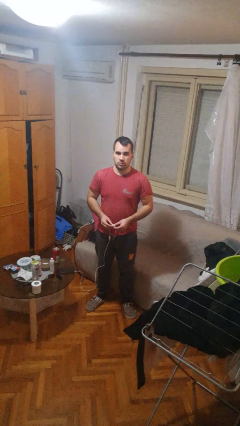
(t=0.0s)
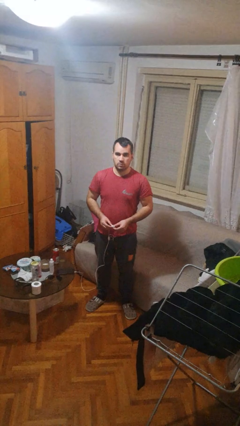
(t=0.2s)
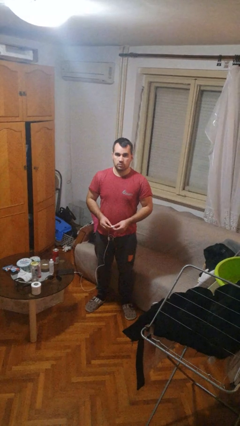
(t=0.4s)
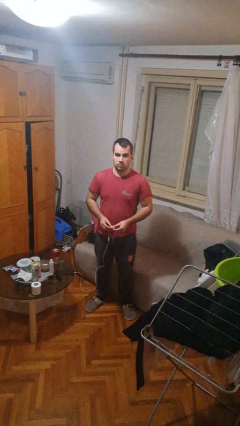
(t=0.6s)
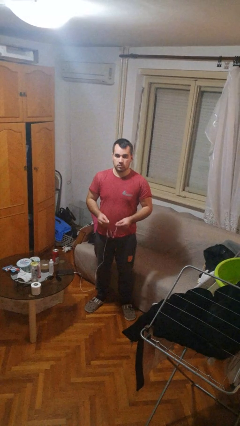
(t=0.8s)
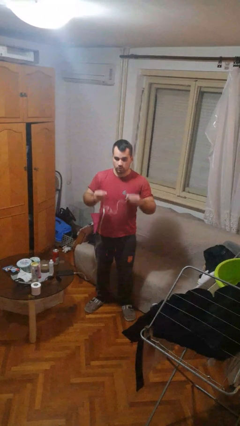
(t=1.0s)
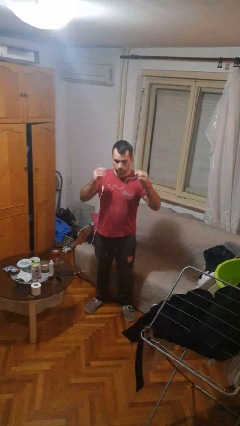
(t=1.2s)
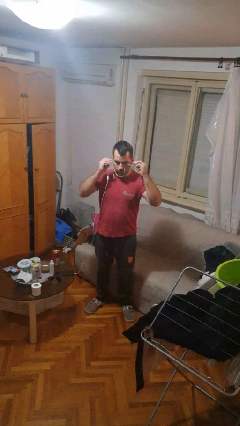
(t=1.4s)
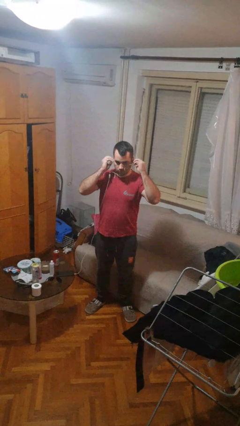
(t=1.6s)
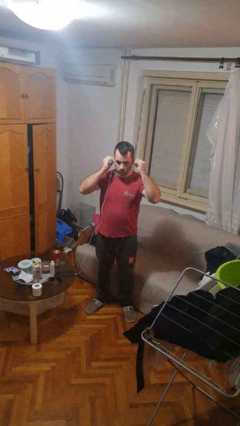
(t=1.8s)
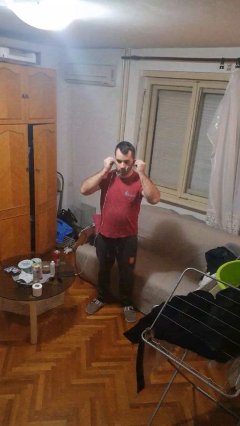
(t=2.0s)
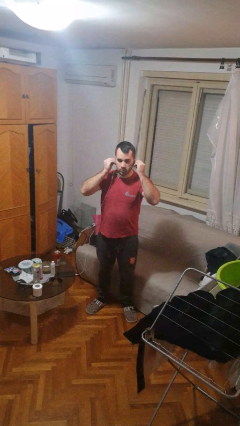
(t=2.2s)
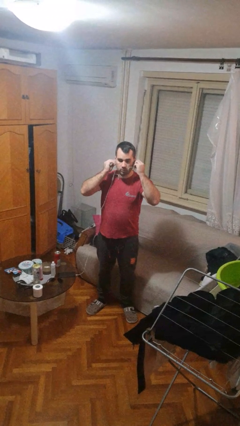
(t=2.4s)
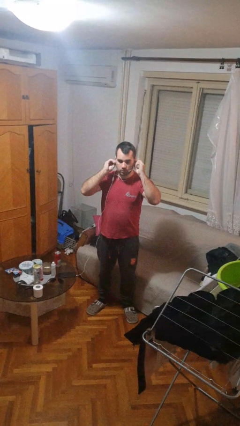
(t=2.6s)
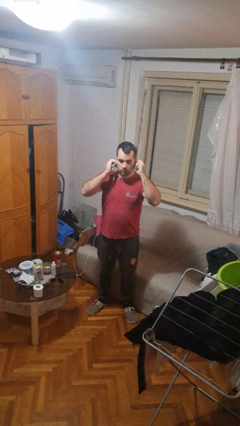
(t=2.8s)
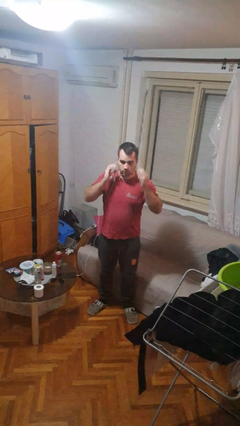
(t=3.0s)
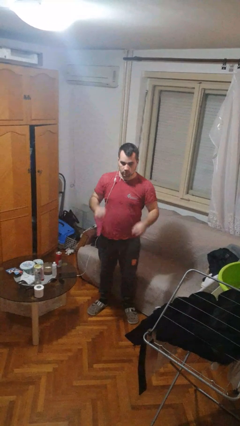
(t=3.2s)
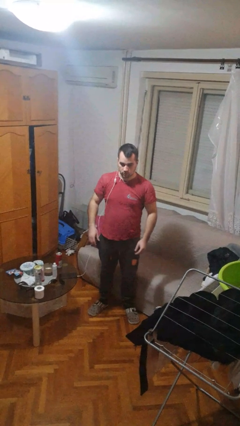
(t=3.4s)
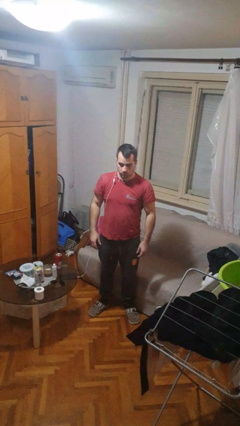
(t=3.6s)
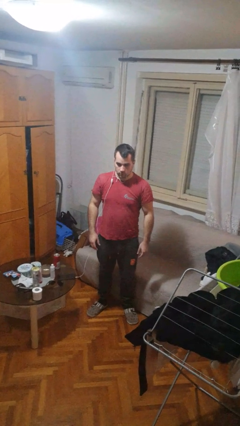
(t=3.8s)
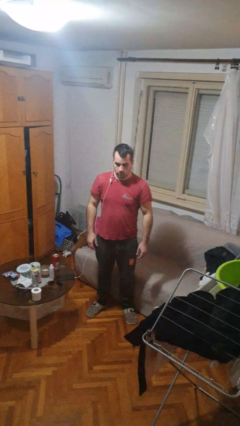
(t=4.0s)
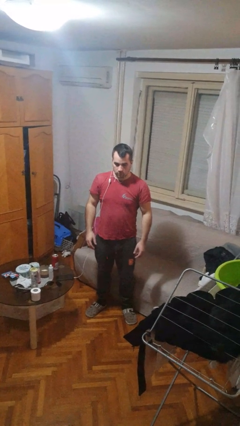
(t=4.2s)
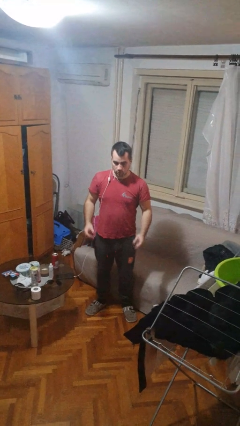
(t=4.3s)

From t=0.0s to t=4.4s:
person puts on headphones

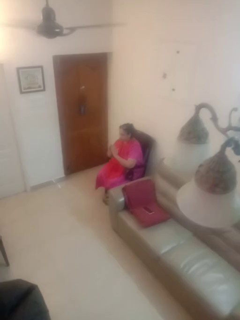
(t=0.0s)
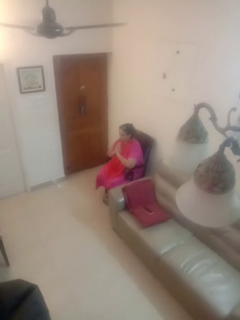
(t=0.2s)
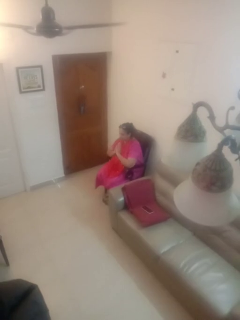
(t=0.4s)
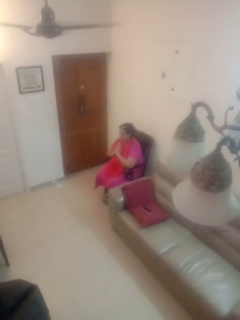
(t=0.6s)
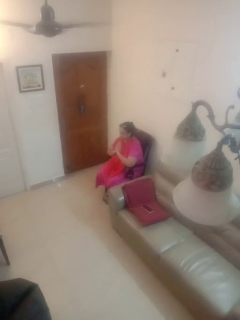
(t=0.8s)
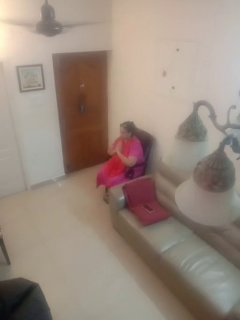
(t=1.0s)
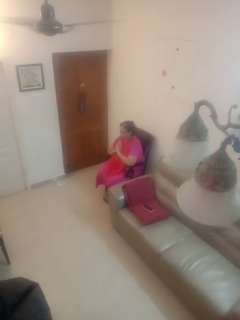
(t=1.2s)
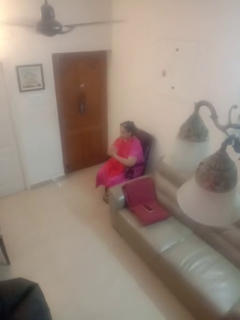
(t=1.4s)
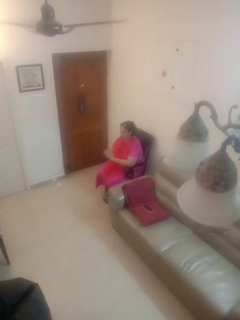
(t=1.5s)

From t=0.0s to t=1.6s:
person prays

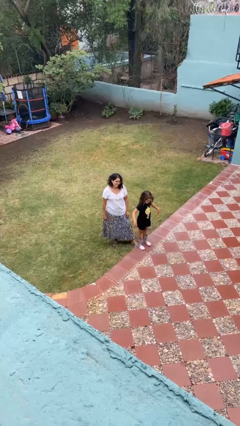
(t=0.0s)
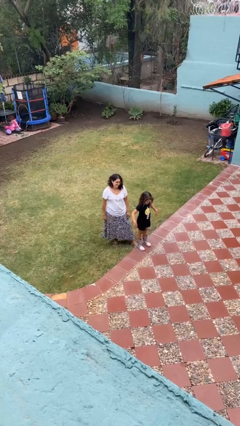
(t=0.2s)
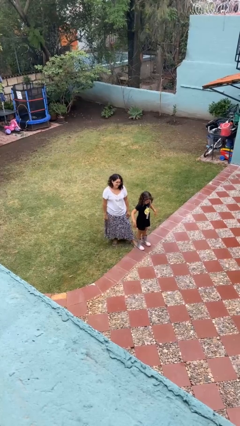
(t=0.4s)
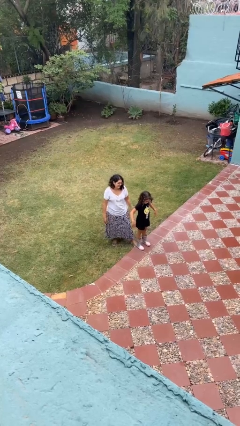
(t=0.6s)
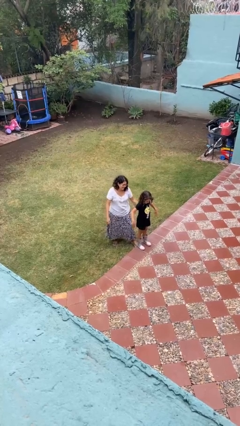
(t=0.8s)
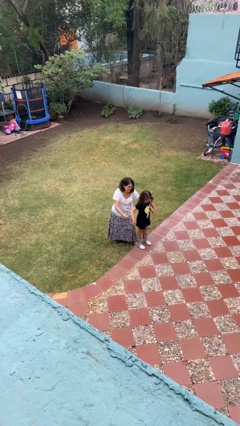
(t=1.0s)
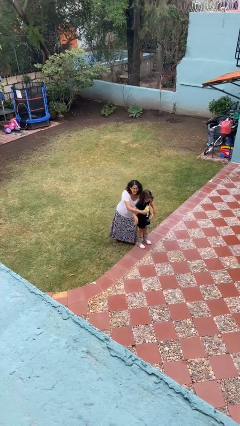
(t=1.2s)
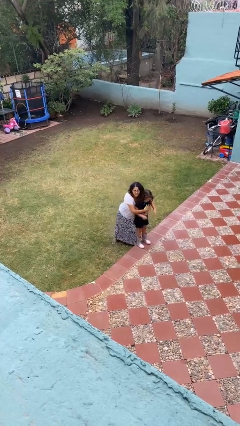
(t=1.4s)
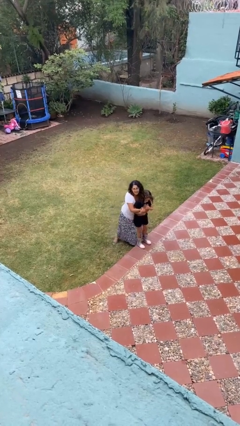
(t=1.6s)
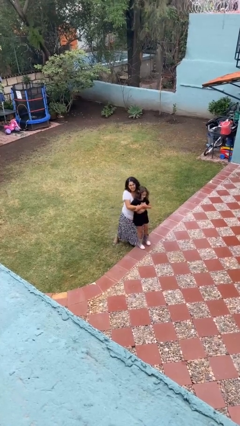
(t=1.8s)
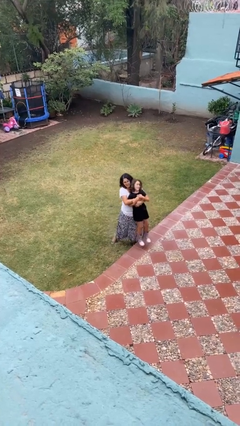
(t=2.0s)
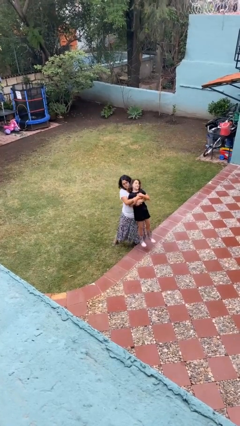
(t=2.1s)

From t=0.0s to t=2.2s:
person picks up person

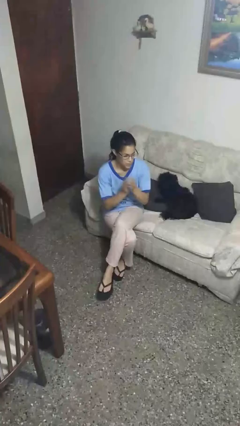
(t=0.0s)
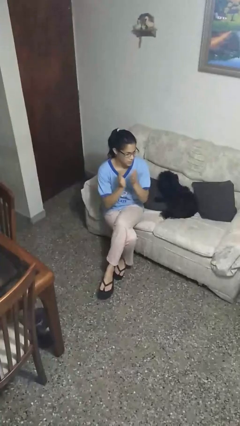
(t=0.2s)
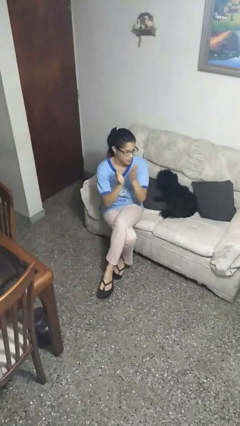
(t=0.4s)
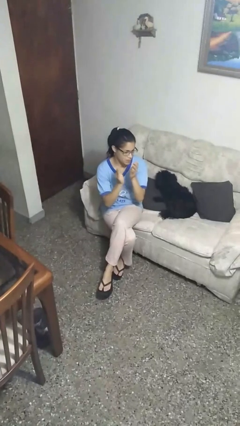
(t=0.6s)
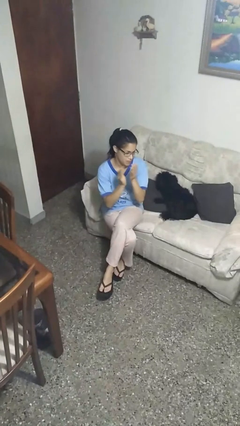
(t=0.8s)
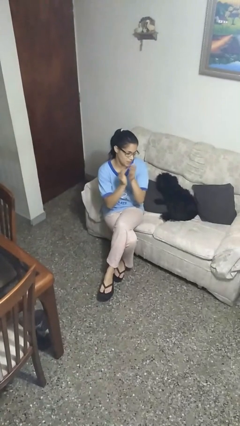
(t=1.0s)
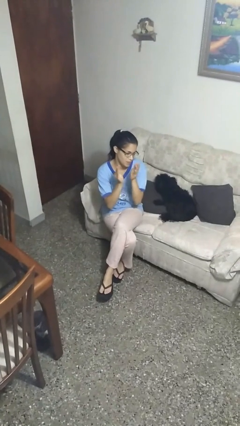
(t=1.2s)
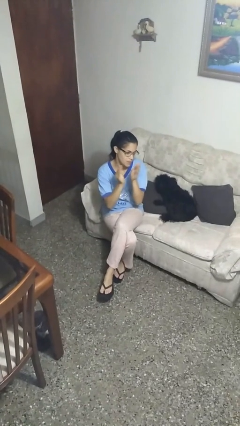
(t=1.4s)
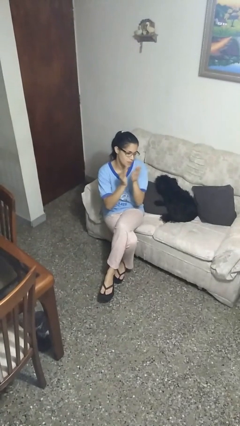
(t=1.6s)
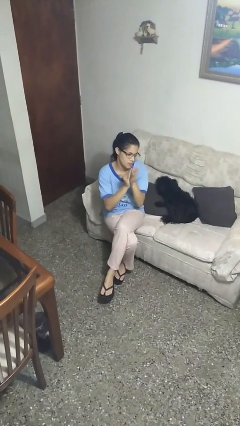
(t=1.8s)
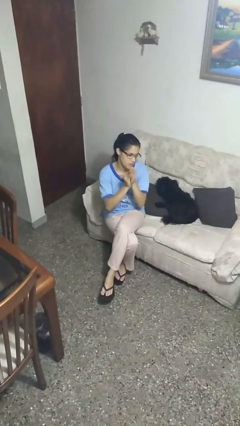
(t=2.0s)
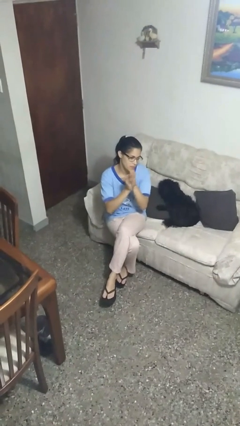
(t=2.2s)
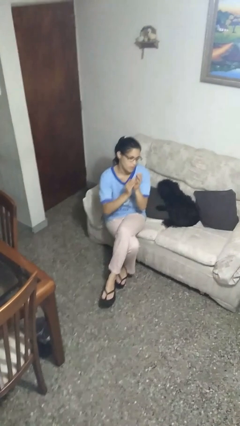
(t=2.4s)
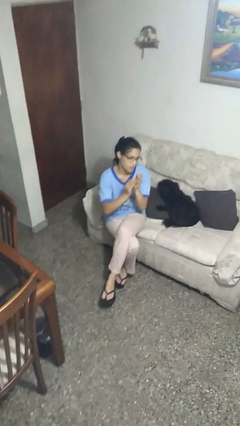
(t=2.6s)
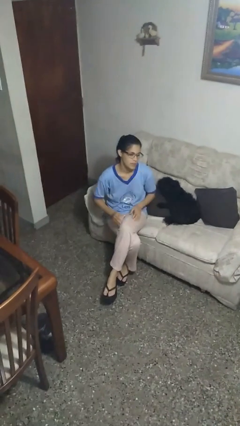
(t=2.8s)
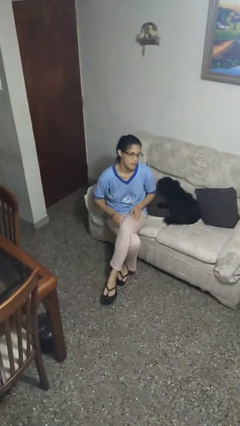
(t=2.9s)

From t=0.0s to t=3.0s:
person claps hands

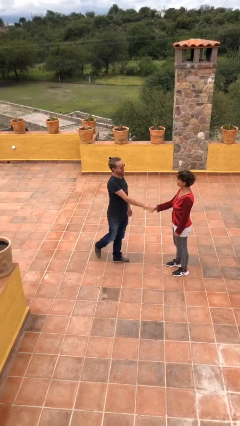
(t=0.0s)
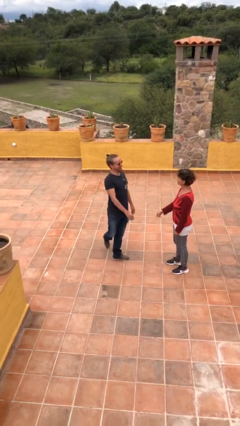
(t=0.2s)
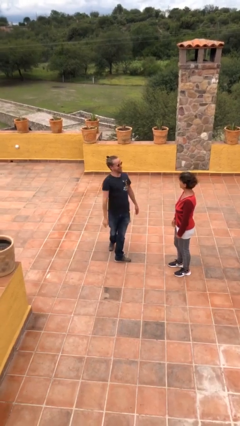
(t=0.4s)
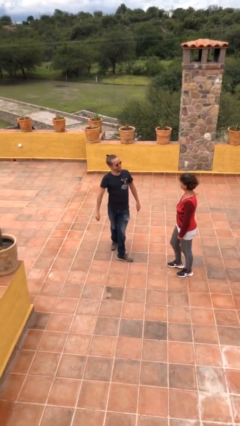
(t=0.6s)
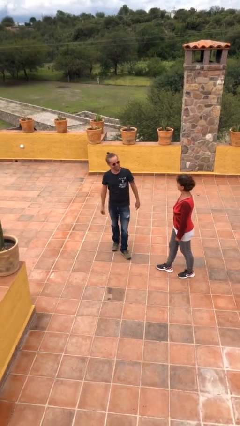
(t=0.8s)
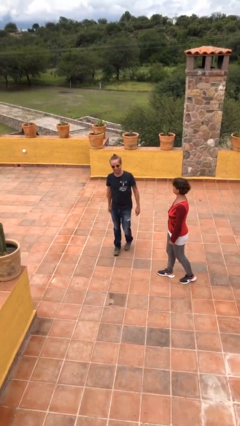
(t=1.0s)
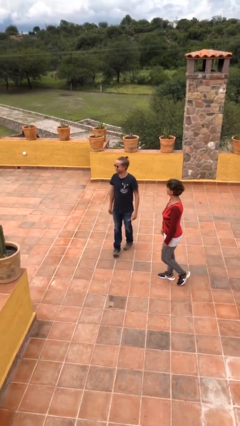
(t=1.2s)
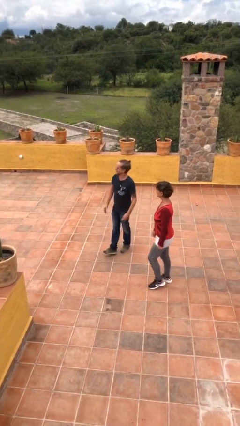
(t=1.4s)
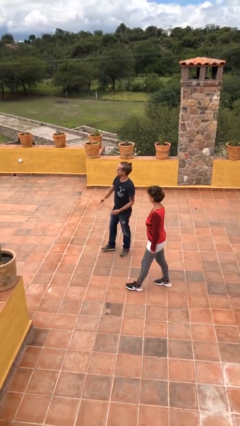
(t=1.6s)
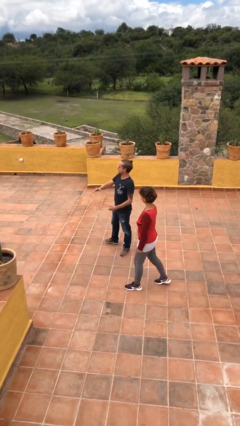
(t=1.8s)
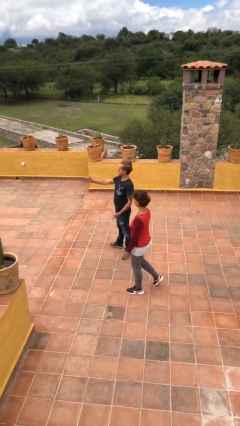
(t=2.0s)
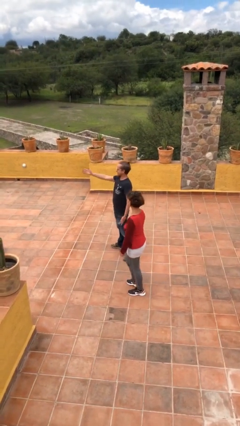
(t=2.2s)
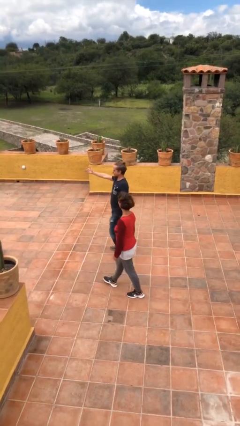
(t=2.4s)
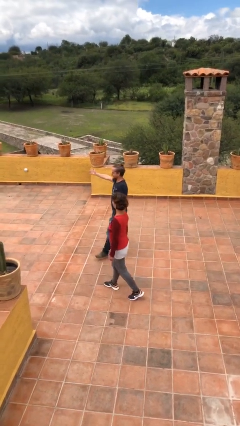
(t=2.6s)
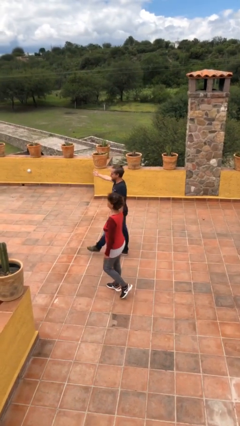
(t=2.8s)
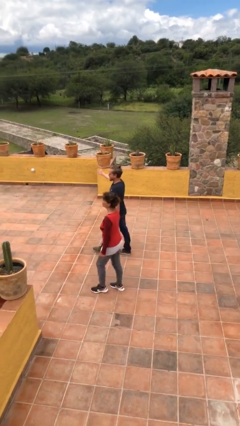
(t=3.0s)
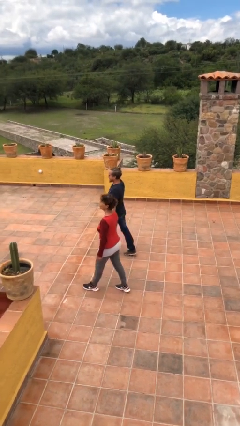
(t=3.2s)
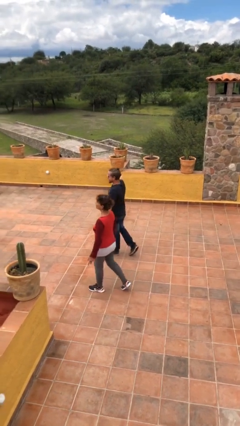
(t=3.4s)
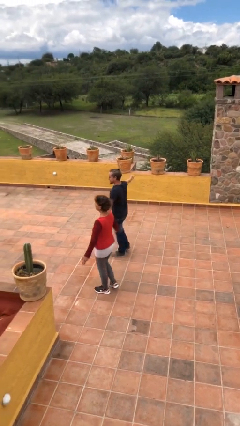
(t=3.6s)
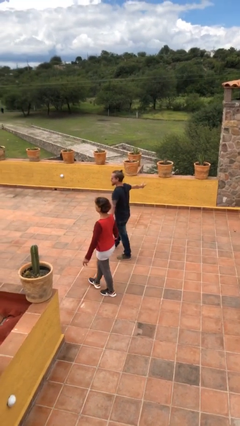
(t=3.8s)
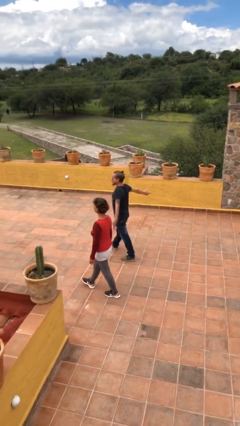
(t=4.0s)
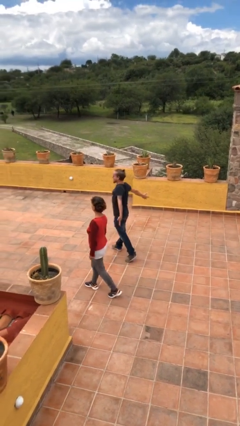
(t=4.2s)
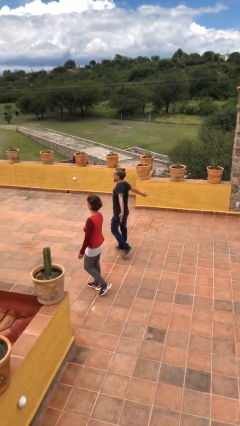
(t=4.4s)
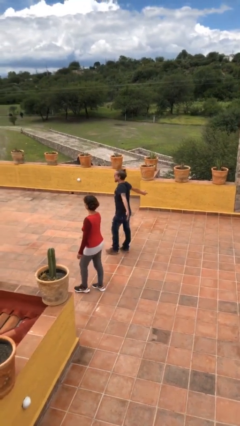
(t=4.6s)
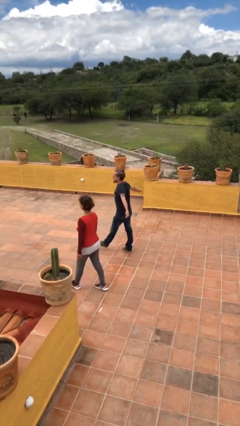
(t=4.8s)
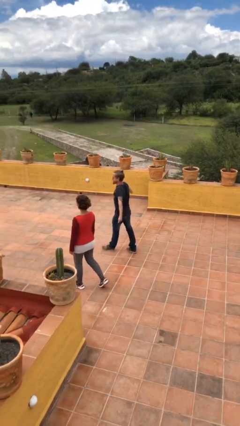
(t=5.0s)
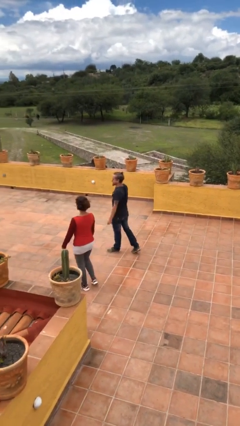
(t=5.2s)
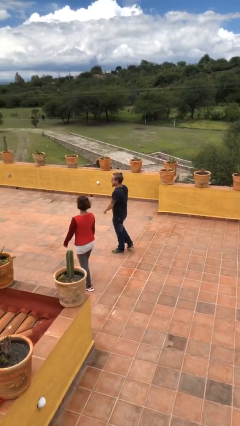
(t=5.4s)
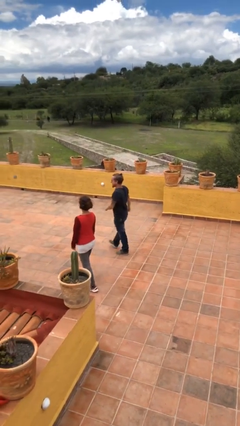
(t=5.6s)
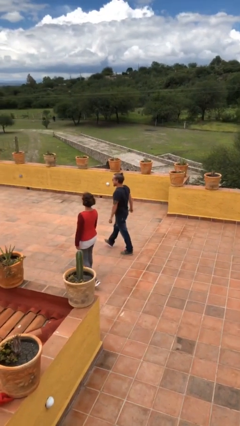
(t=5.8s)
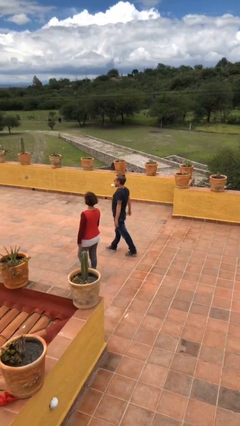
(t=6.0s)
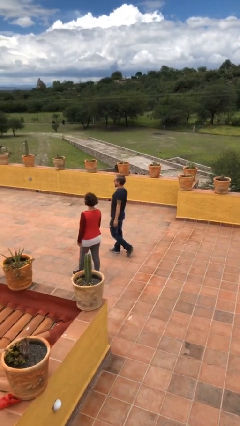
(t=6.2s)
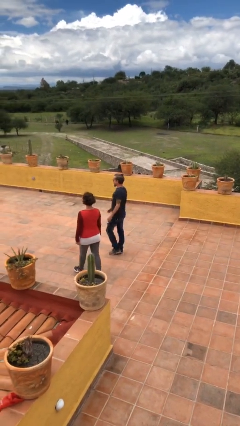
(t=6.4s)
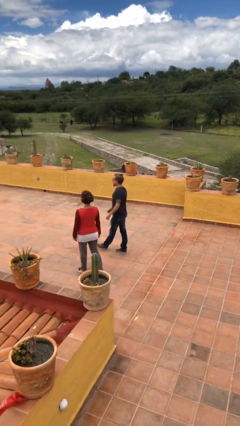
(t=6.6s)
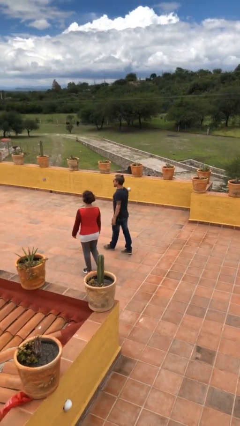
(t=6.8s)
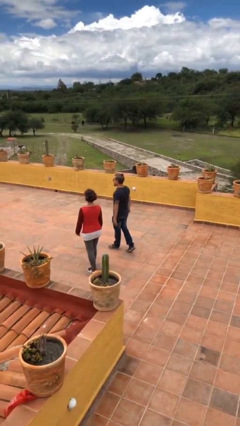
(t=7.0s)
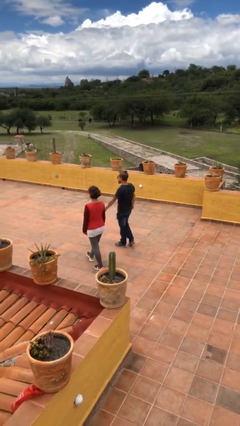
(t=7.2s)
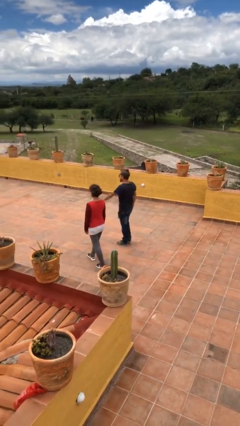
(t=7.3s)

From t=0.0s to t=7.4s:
person talks to person
